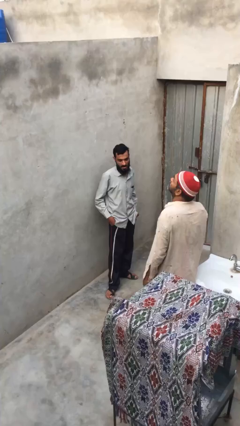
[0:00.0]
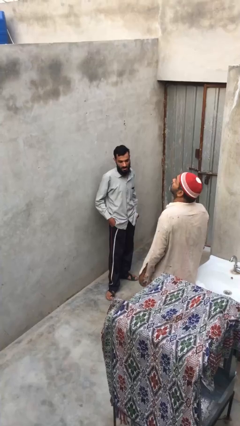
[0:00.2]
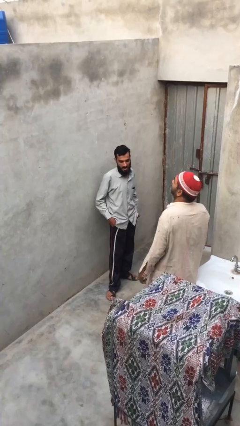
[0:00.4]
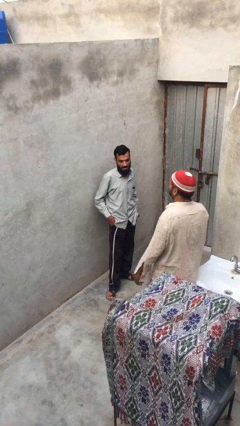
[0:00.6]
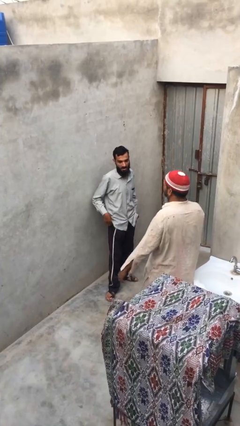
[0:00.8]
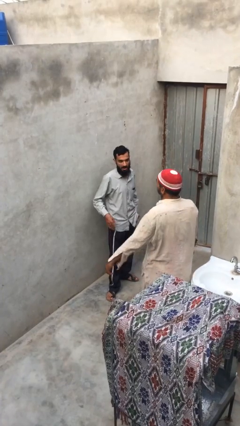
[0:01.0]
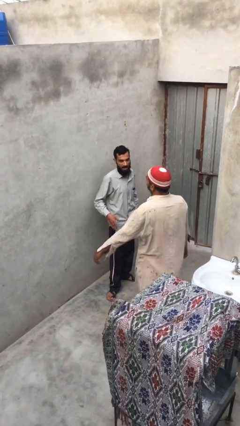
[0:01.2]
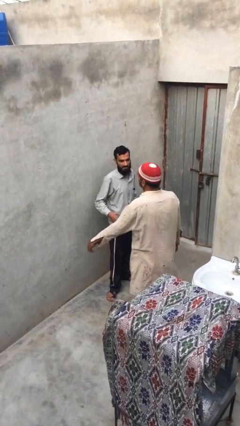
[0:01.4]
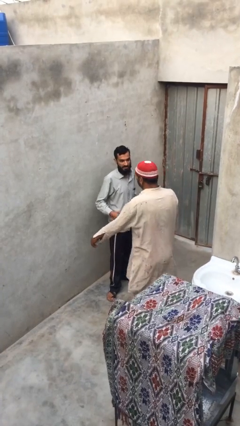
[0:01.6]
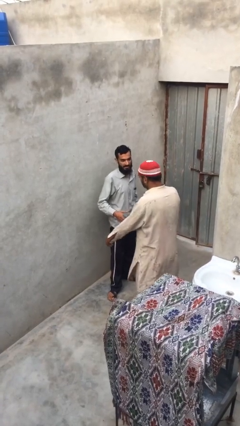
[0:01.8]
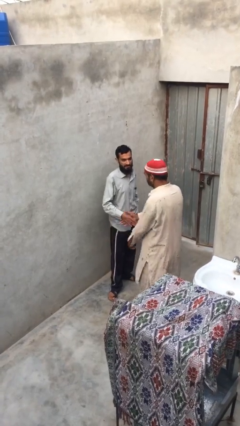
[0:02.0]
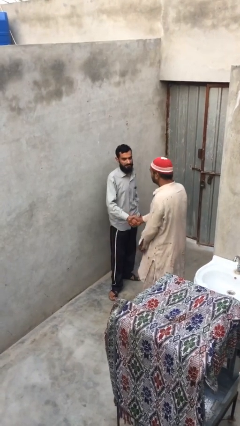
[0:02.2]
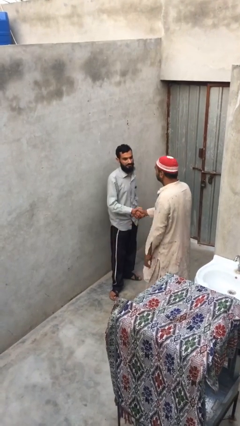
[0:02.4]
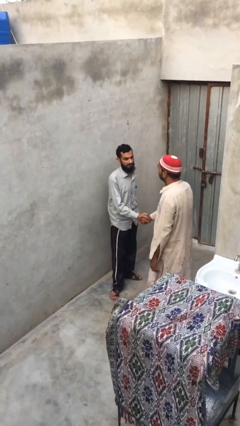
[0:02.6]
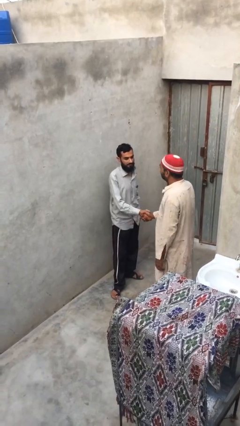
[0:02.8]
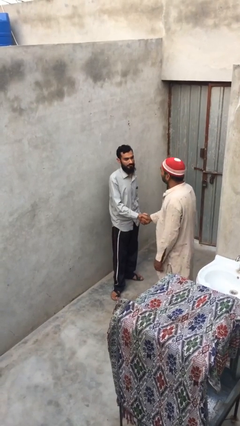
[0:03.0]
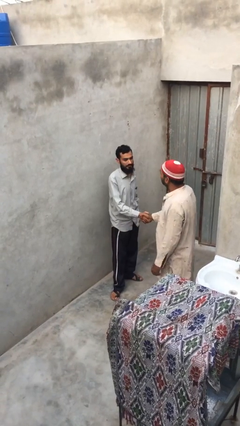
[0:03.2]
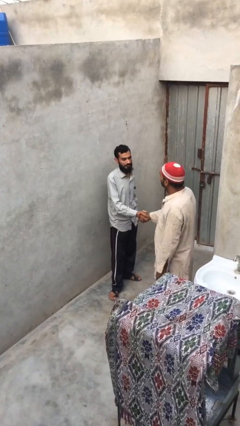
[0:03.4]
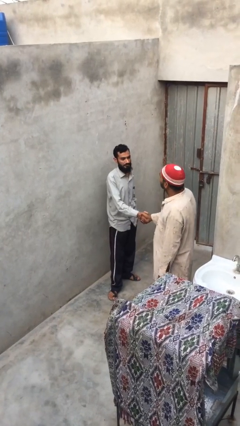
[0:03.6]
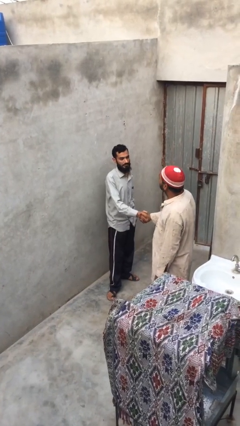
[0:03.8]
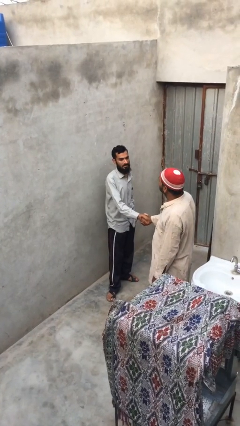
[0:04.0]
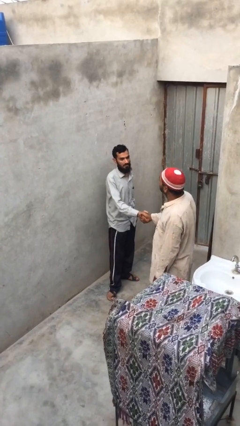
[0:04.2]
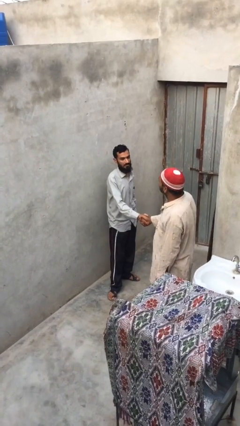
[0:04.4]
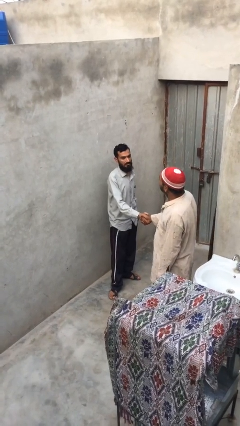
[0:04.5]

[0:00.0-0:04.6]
person shakes hand

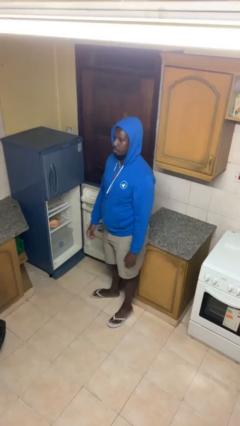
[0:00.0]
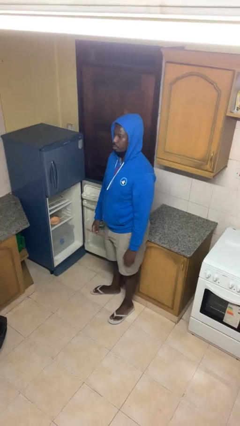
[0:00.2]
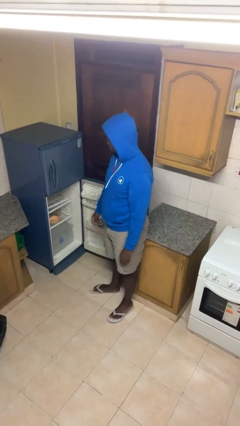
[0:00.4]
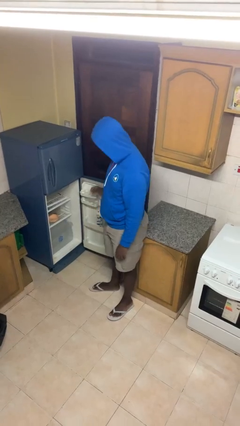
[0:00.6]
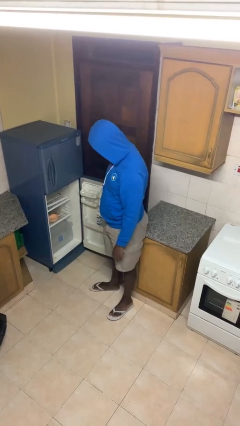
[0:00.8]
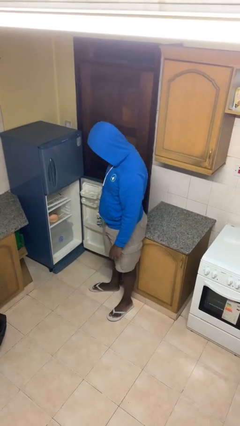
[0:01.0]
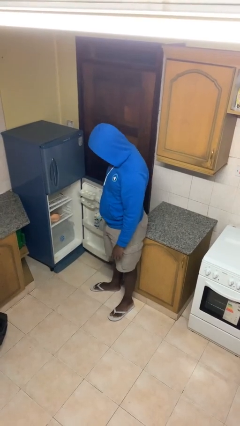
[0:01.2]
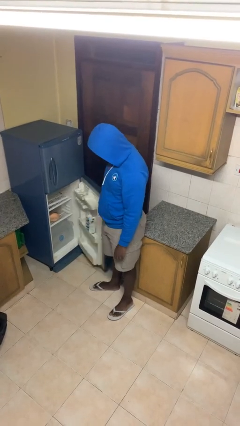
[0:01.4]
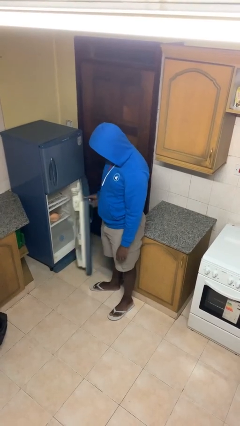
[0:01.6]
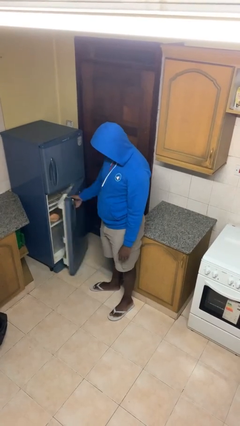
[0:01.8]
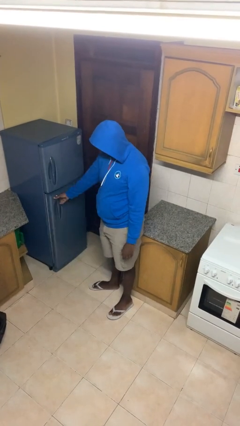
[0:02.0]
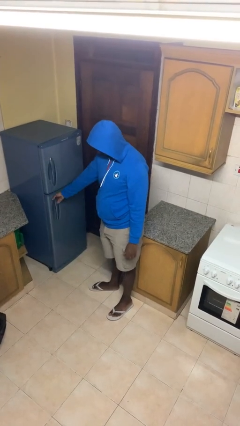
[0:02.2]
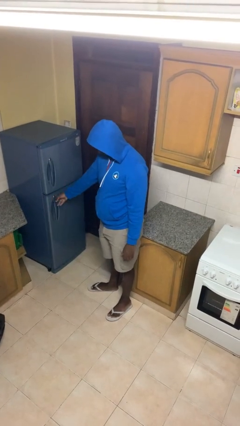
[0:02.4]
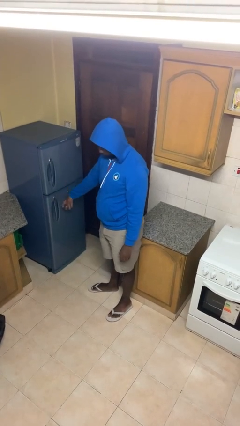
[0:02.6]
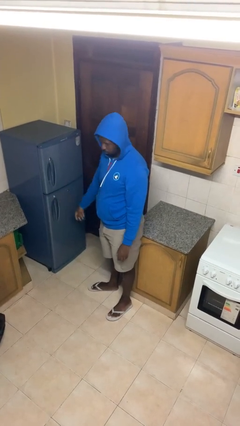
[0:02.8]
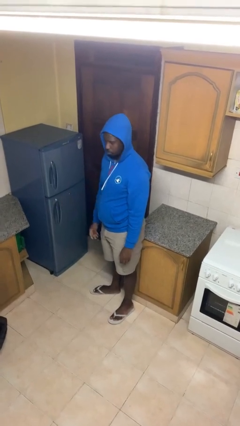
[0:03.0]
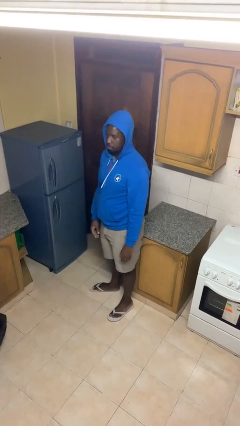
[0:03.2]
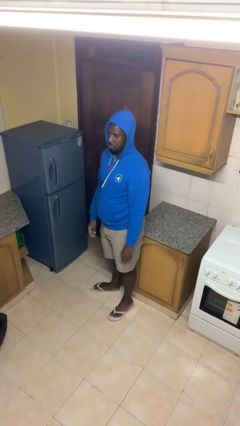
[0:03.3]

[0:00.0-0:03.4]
person closes refrigerator

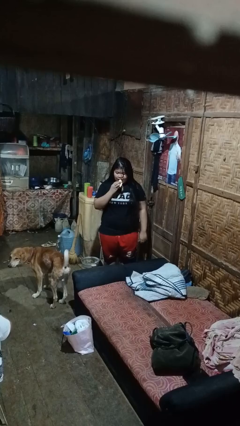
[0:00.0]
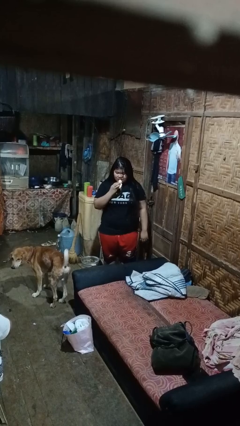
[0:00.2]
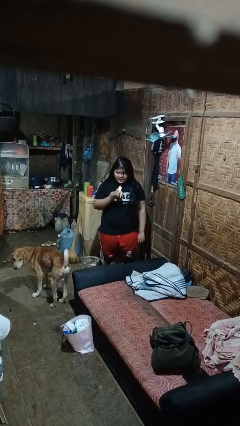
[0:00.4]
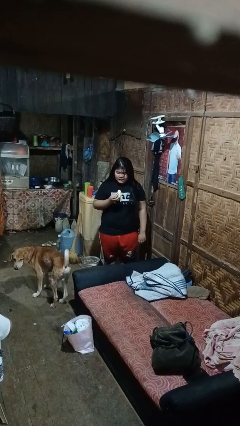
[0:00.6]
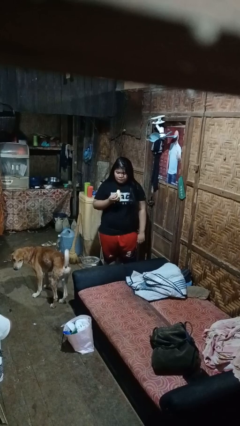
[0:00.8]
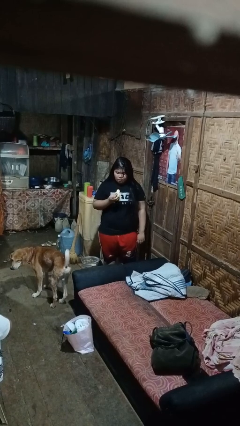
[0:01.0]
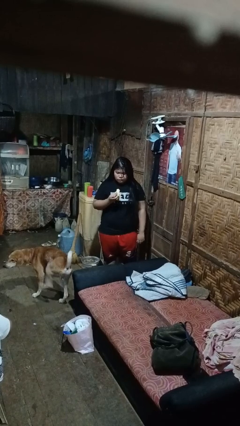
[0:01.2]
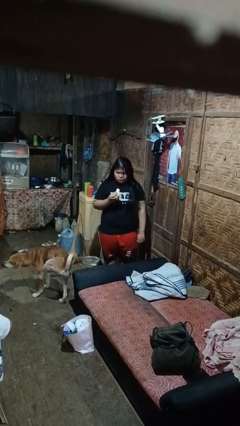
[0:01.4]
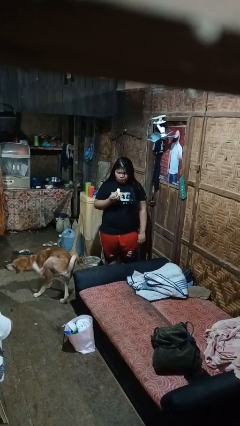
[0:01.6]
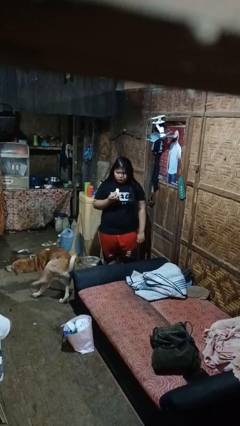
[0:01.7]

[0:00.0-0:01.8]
person eats banana

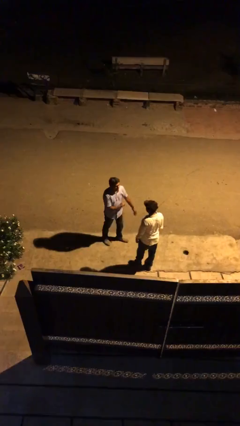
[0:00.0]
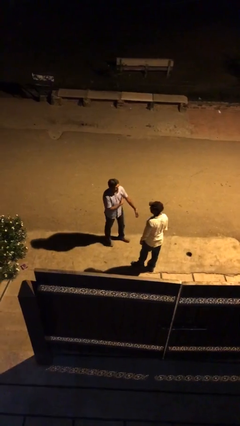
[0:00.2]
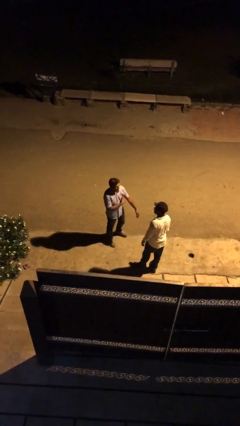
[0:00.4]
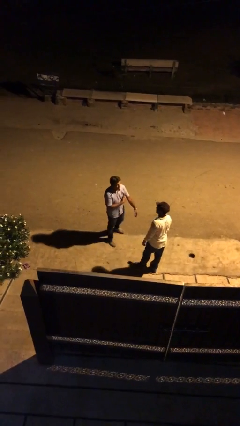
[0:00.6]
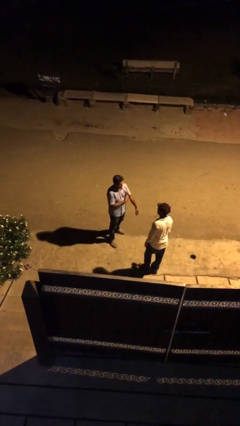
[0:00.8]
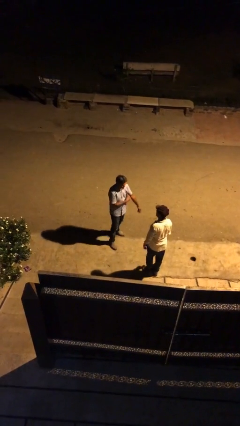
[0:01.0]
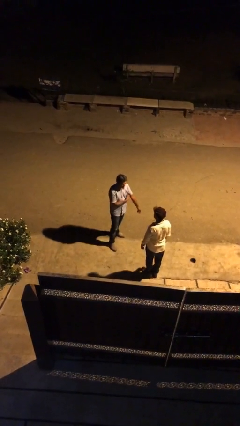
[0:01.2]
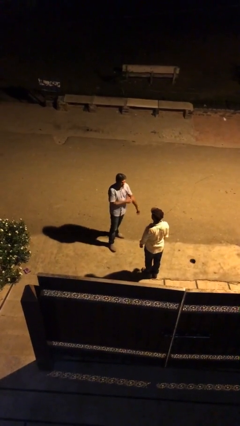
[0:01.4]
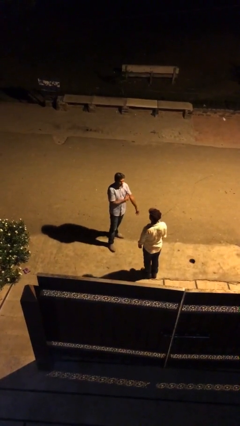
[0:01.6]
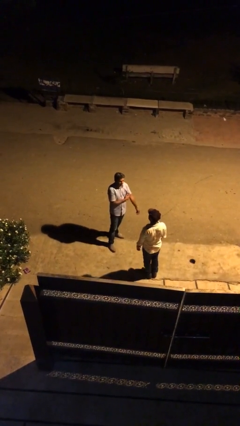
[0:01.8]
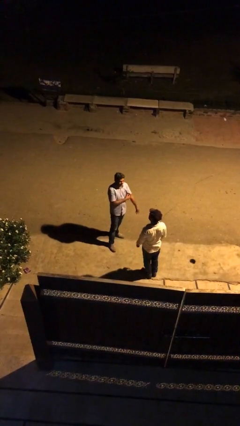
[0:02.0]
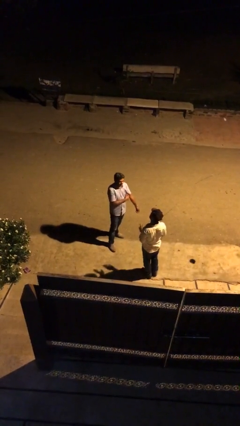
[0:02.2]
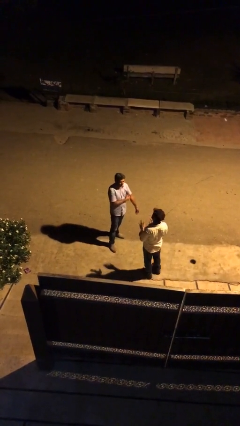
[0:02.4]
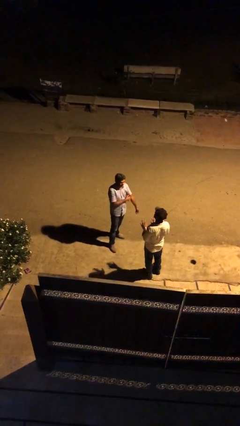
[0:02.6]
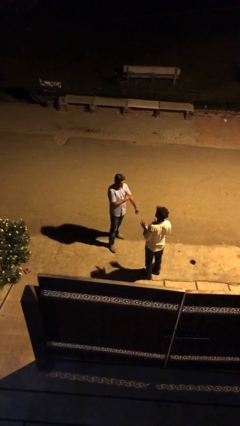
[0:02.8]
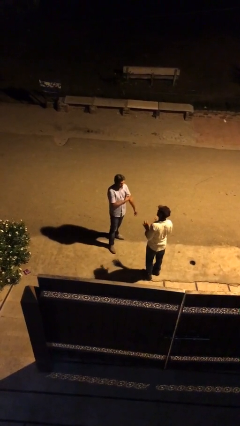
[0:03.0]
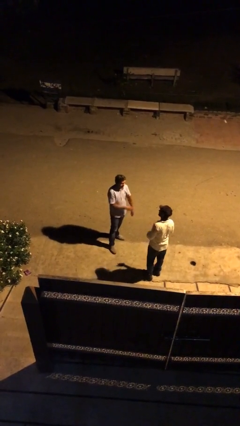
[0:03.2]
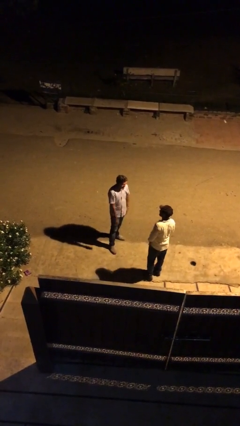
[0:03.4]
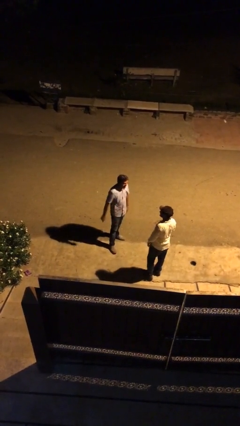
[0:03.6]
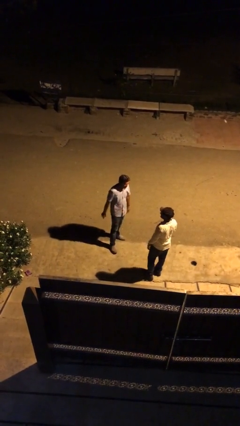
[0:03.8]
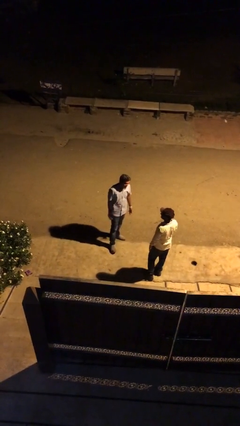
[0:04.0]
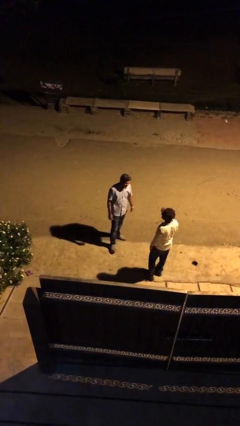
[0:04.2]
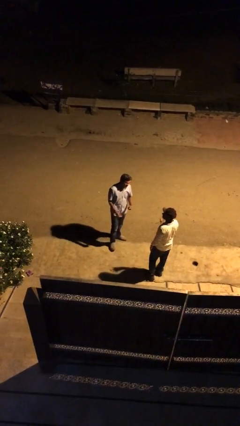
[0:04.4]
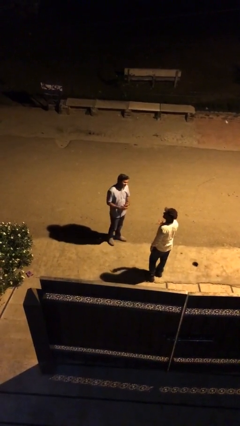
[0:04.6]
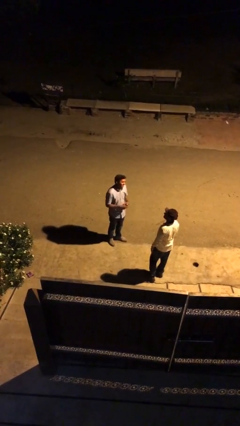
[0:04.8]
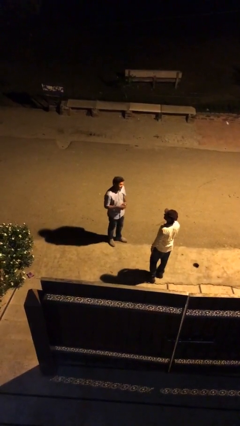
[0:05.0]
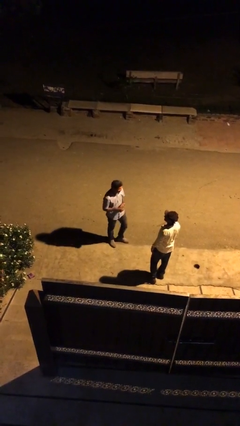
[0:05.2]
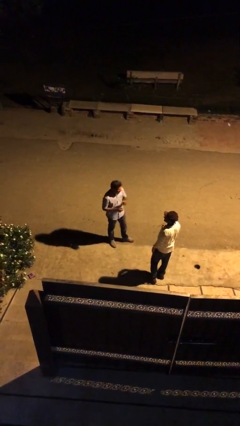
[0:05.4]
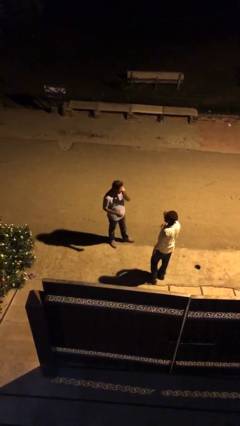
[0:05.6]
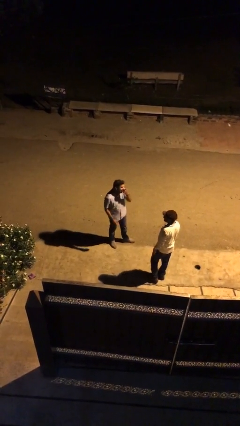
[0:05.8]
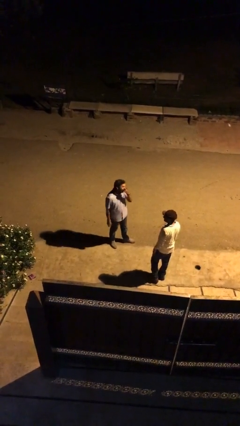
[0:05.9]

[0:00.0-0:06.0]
person talks to person

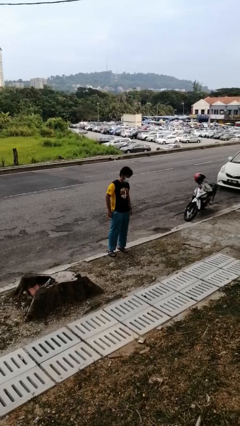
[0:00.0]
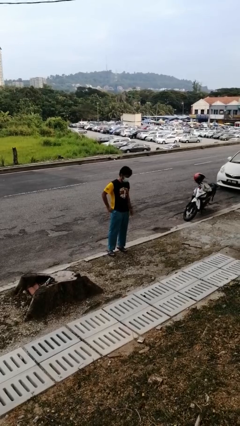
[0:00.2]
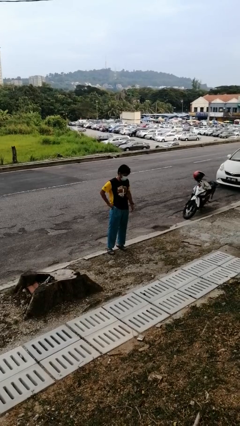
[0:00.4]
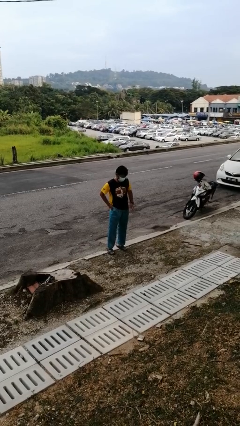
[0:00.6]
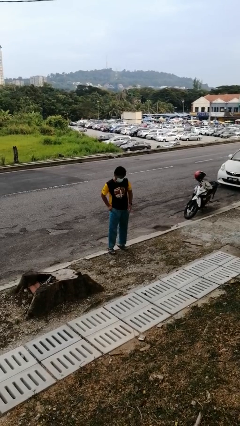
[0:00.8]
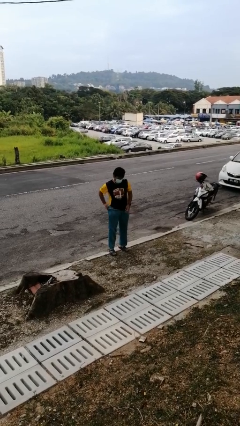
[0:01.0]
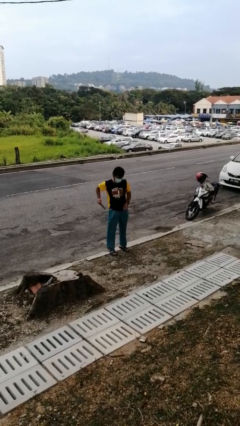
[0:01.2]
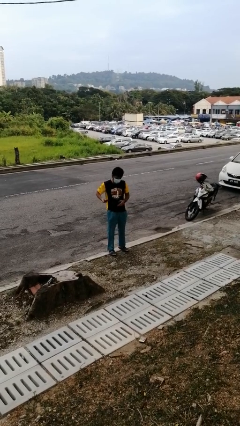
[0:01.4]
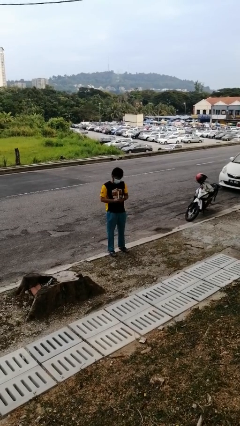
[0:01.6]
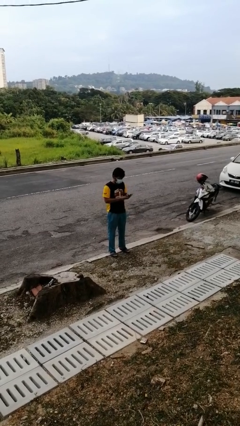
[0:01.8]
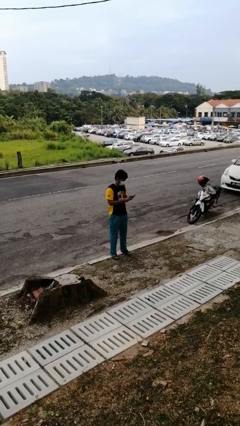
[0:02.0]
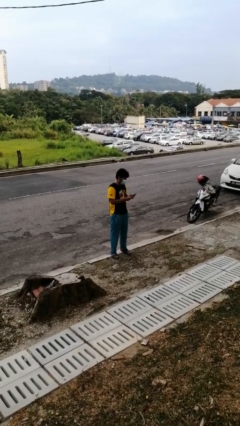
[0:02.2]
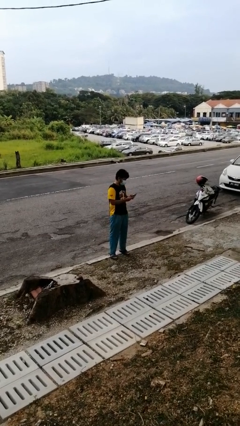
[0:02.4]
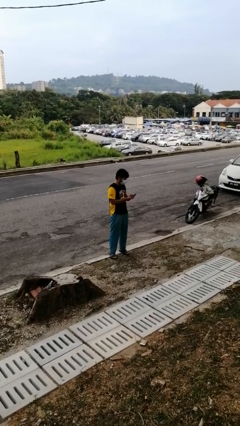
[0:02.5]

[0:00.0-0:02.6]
person takes phone from pocket
